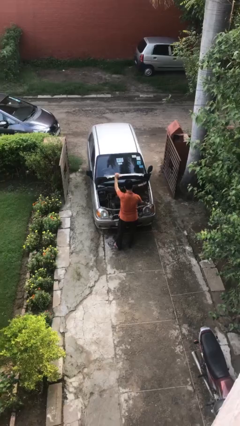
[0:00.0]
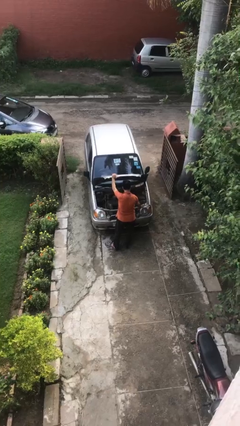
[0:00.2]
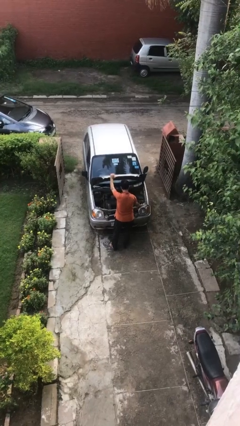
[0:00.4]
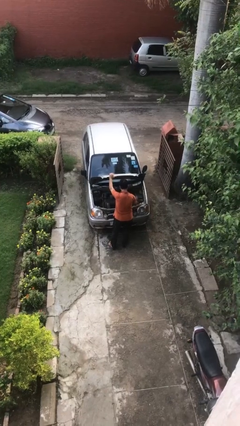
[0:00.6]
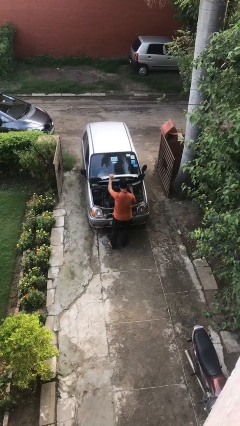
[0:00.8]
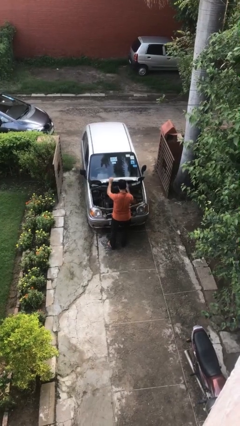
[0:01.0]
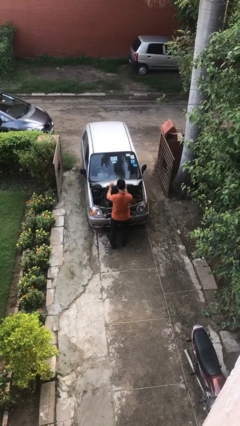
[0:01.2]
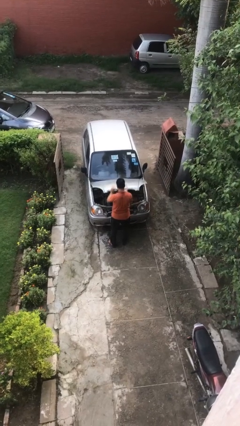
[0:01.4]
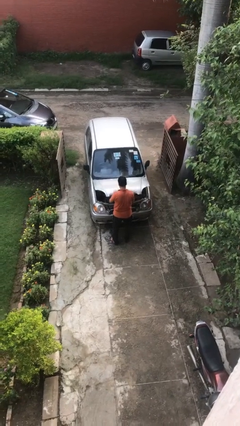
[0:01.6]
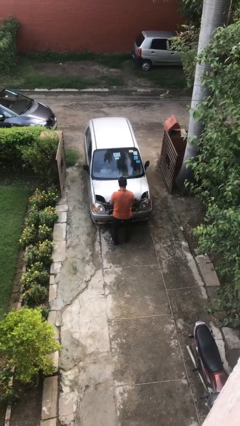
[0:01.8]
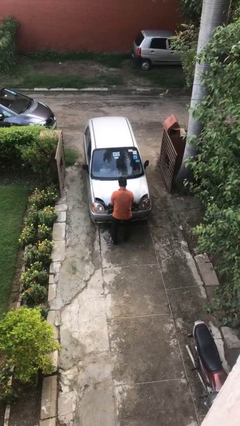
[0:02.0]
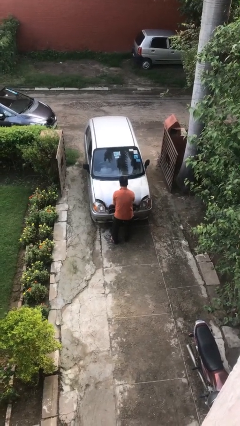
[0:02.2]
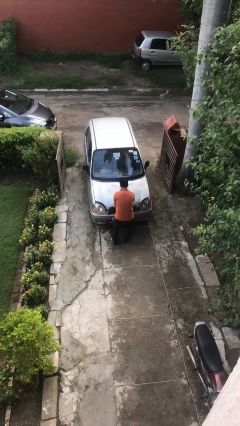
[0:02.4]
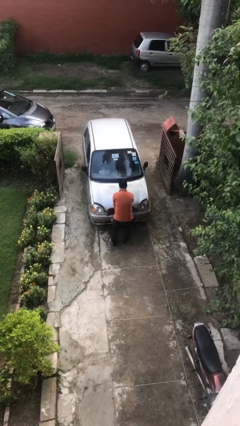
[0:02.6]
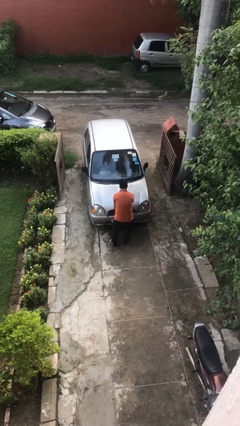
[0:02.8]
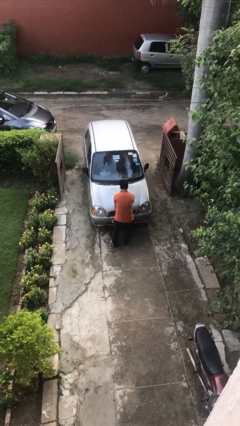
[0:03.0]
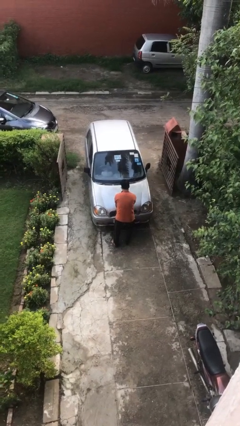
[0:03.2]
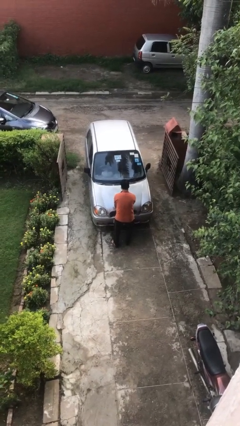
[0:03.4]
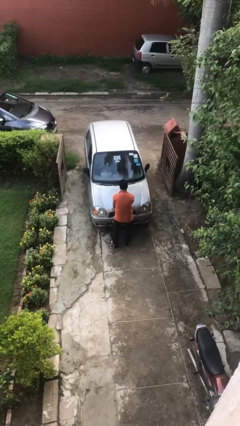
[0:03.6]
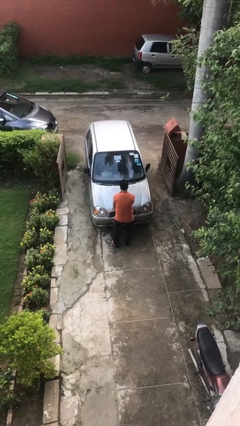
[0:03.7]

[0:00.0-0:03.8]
person closes car hood

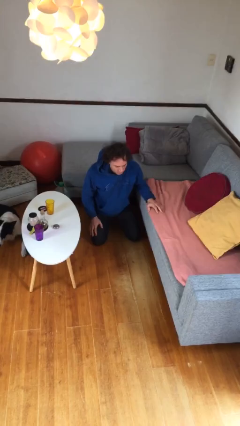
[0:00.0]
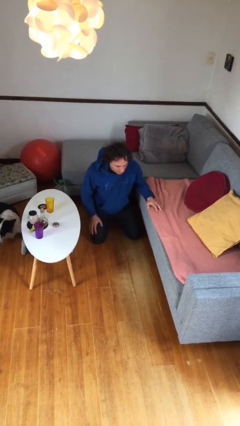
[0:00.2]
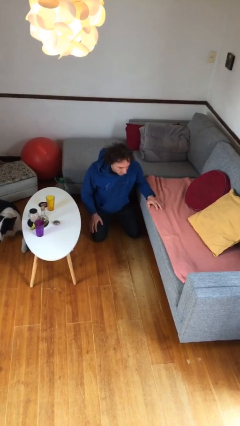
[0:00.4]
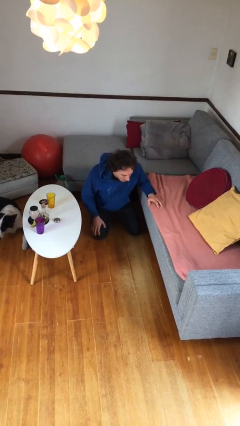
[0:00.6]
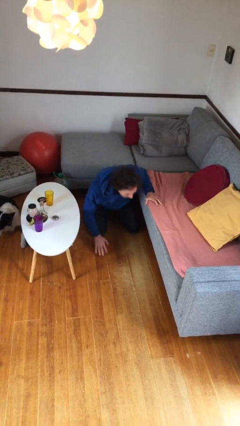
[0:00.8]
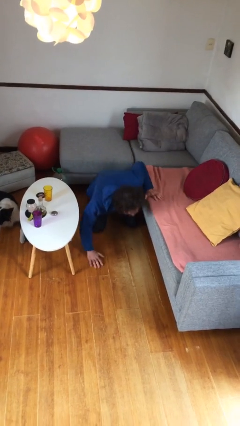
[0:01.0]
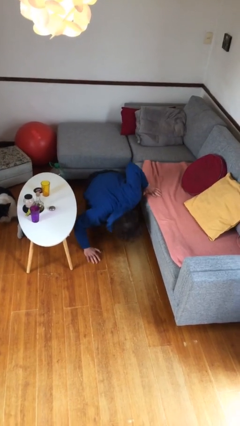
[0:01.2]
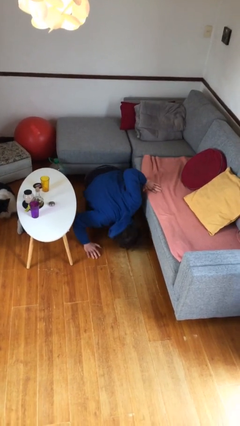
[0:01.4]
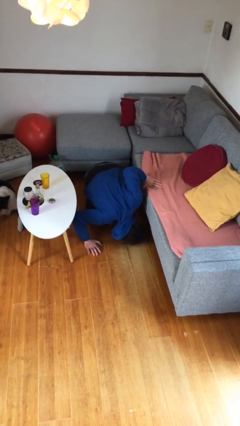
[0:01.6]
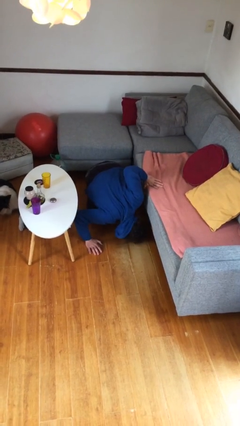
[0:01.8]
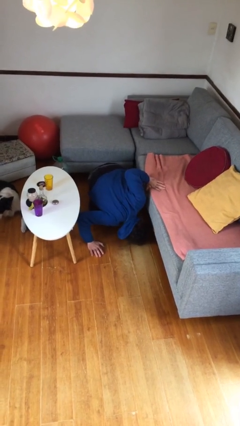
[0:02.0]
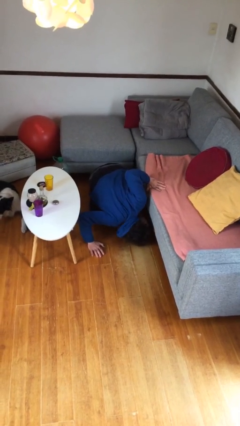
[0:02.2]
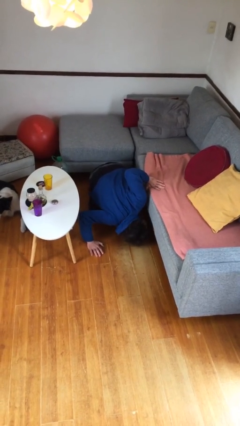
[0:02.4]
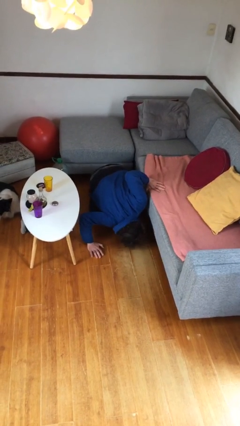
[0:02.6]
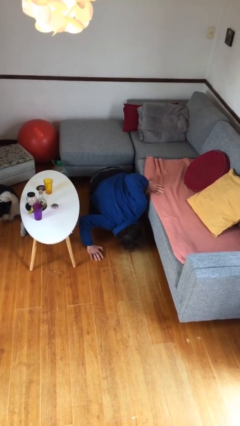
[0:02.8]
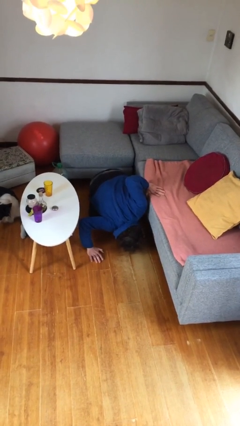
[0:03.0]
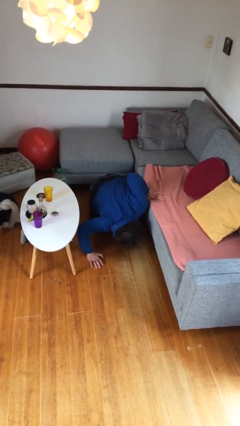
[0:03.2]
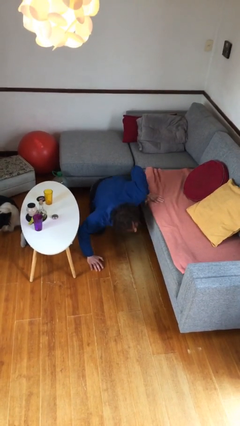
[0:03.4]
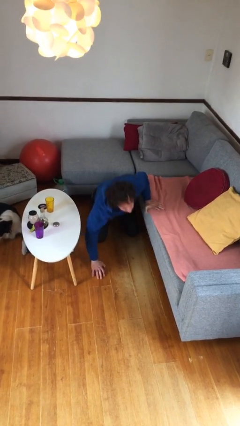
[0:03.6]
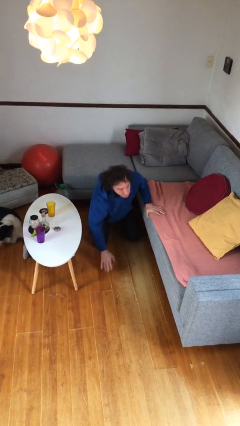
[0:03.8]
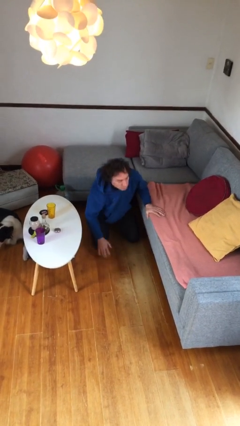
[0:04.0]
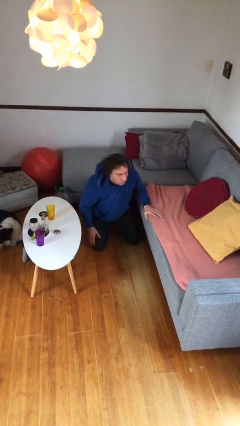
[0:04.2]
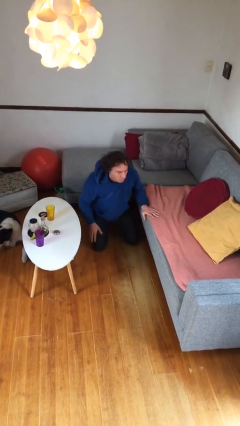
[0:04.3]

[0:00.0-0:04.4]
person searches under couch

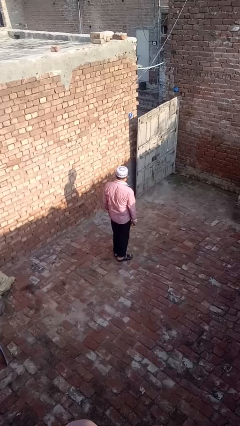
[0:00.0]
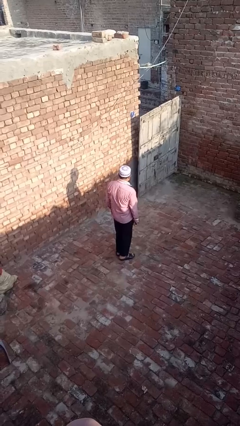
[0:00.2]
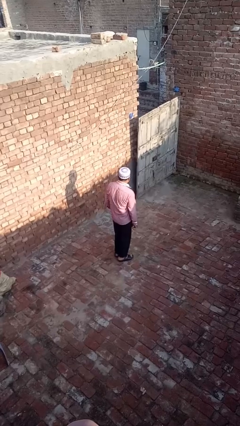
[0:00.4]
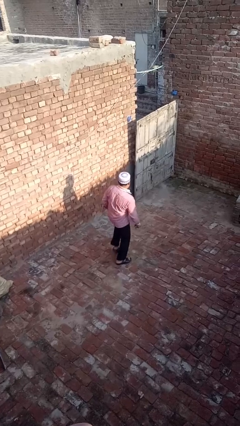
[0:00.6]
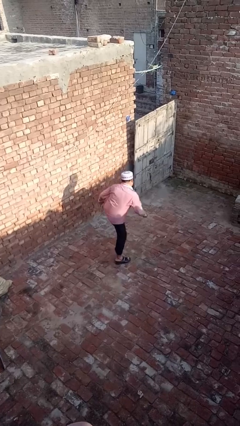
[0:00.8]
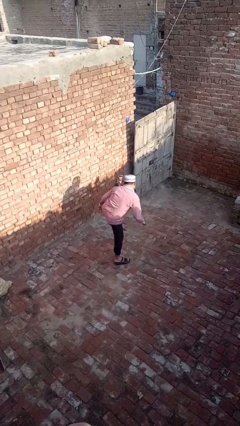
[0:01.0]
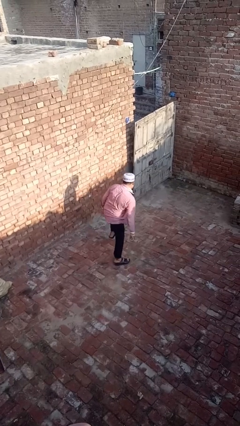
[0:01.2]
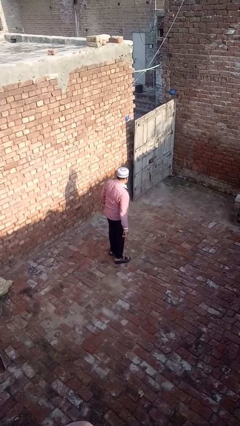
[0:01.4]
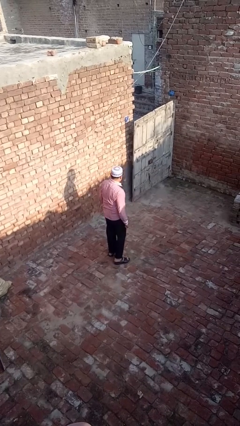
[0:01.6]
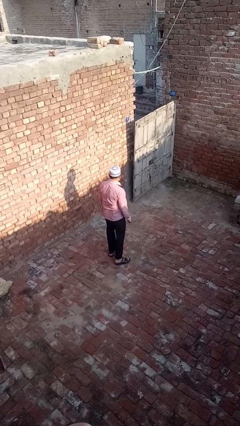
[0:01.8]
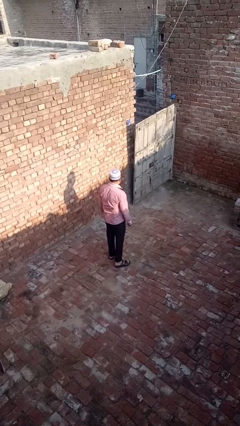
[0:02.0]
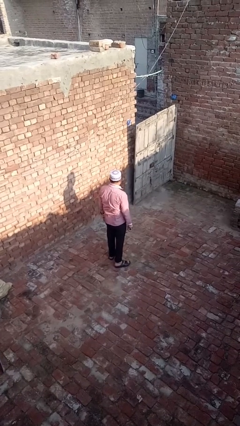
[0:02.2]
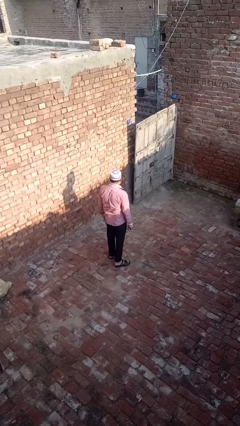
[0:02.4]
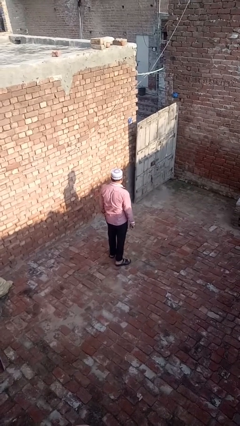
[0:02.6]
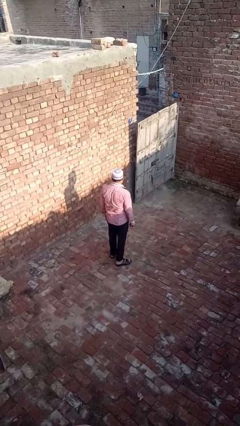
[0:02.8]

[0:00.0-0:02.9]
person karate kicks

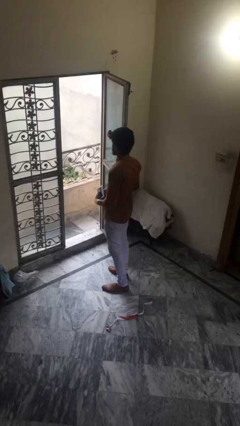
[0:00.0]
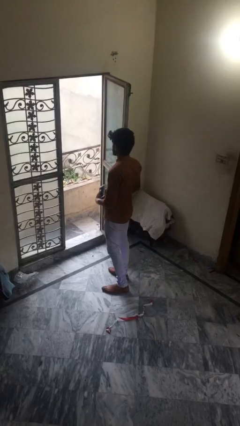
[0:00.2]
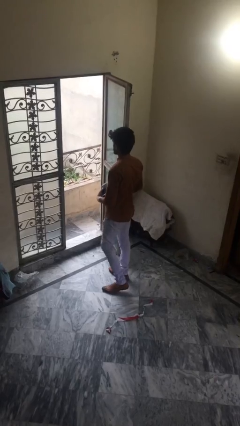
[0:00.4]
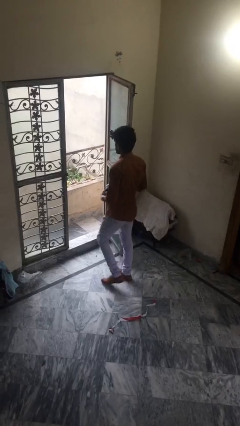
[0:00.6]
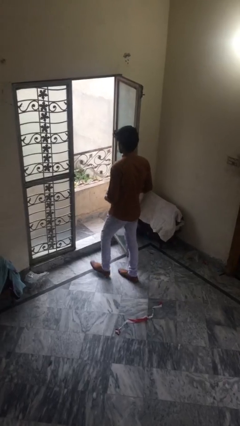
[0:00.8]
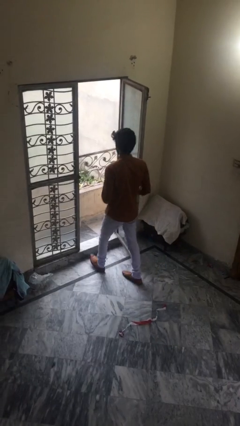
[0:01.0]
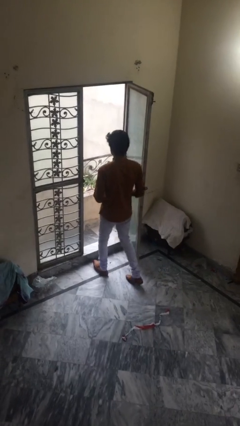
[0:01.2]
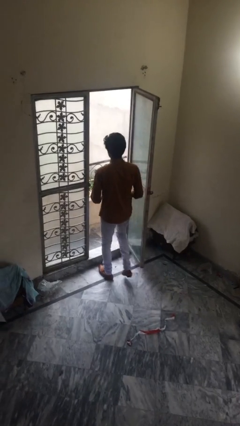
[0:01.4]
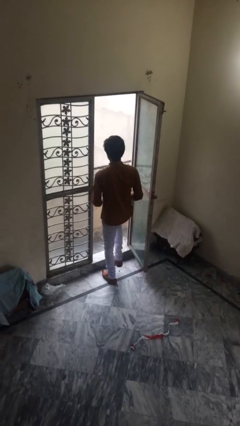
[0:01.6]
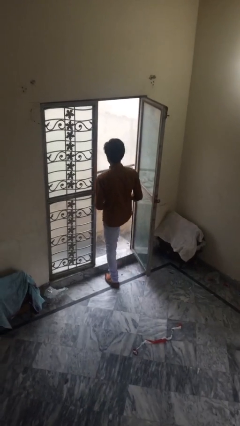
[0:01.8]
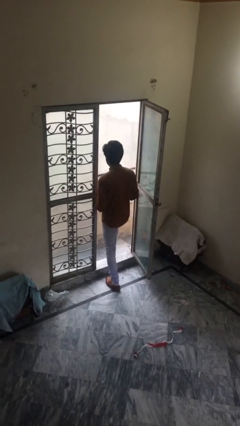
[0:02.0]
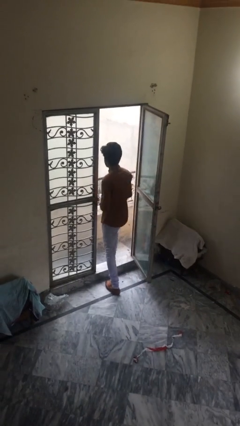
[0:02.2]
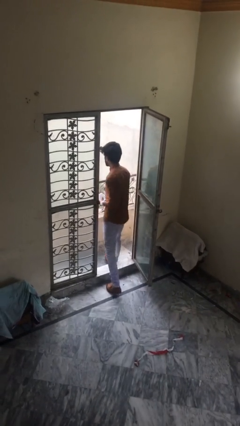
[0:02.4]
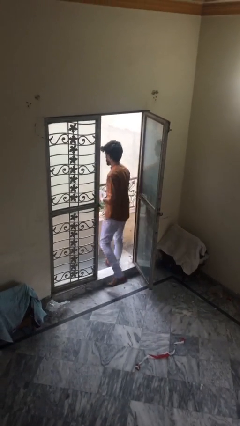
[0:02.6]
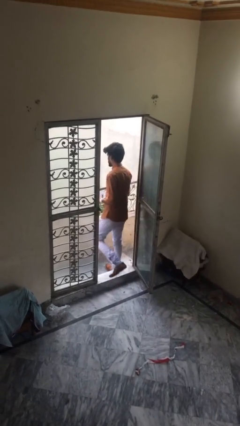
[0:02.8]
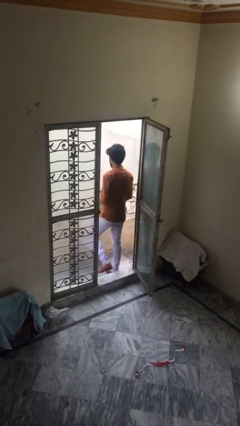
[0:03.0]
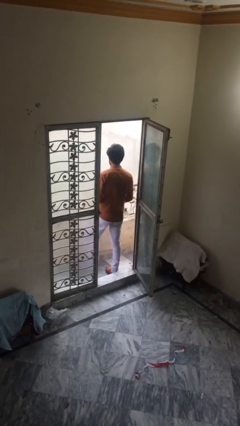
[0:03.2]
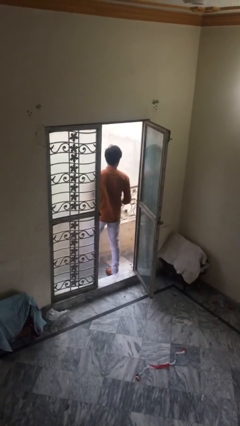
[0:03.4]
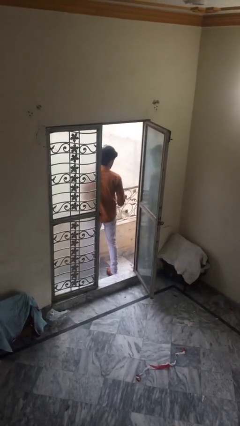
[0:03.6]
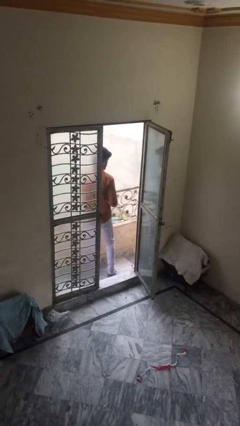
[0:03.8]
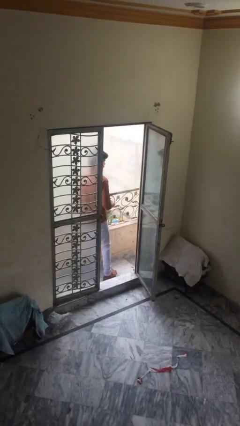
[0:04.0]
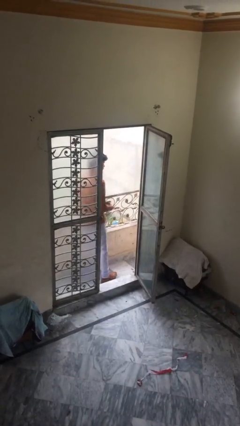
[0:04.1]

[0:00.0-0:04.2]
person exits scene through structure

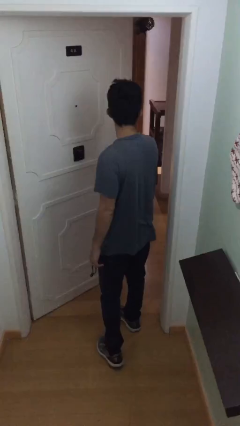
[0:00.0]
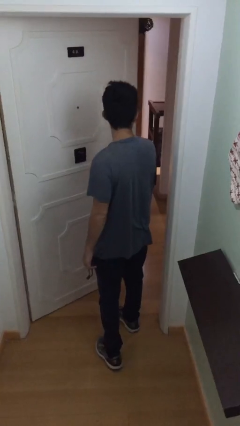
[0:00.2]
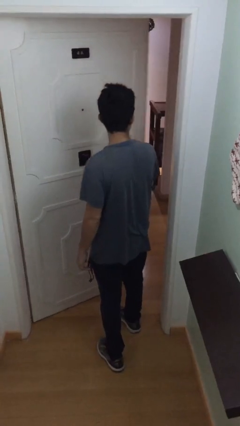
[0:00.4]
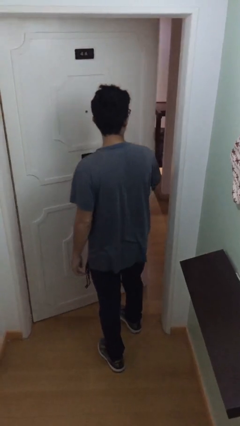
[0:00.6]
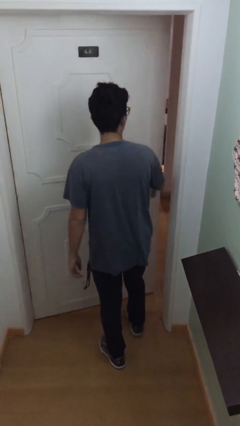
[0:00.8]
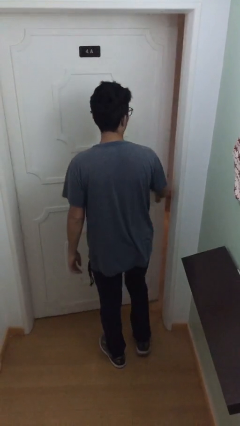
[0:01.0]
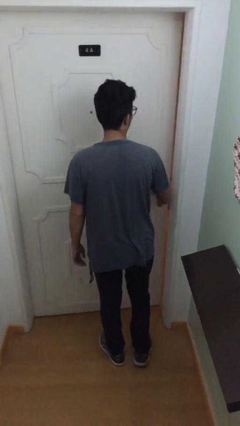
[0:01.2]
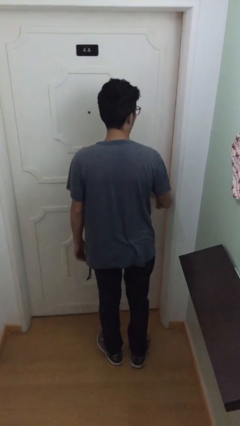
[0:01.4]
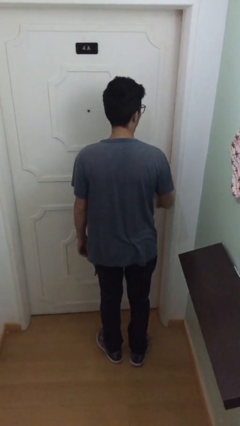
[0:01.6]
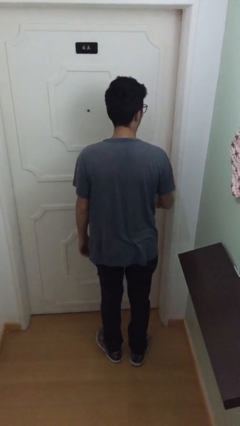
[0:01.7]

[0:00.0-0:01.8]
person closes facility door

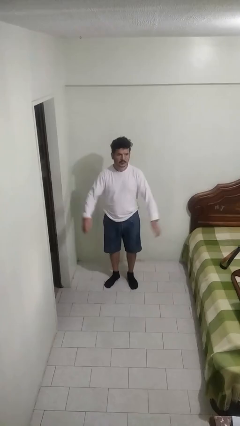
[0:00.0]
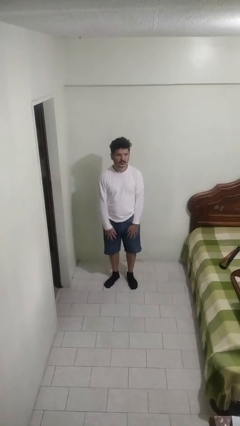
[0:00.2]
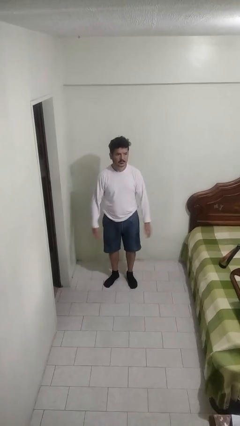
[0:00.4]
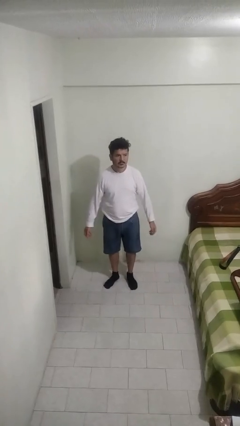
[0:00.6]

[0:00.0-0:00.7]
person slaps hands on thighs

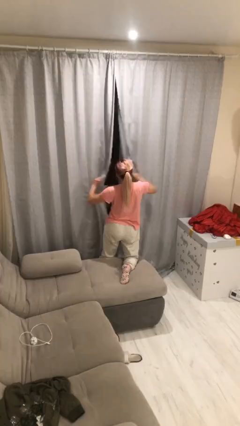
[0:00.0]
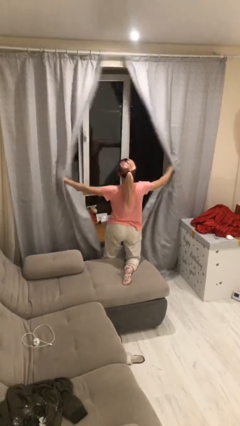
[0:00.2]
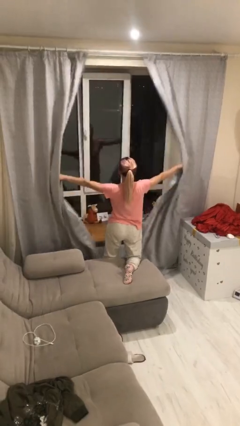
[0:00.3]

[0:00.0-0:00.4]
person opens curtains
